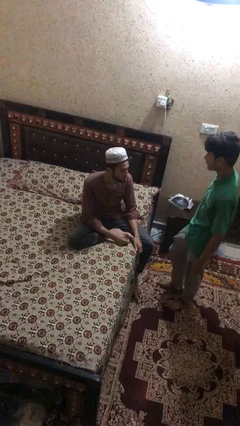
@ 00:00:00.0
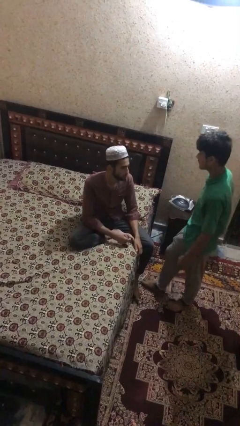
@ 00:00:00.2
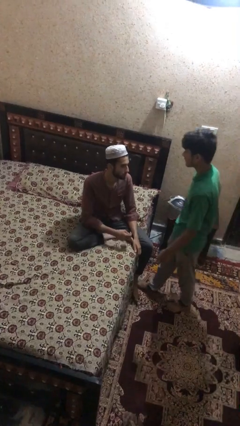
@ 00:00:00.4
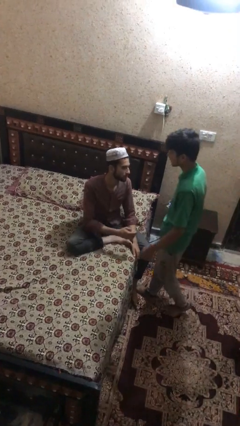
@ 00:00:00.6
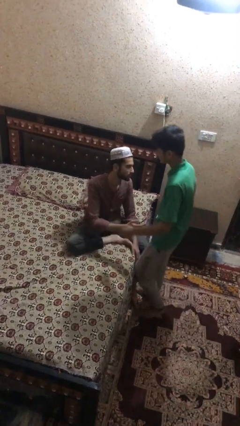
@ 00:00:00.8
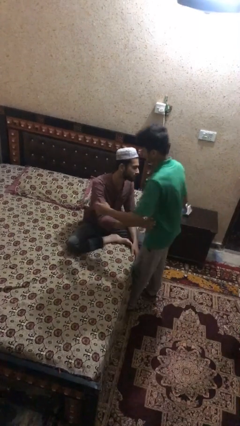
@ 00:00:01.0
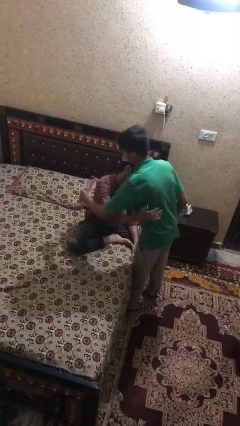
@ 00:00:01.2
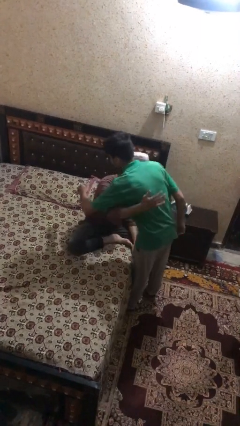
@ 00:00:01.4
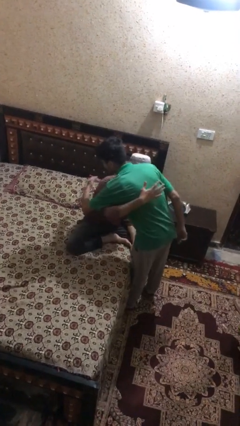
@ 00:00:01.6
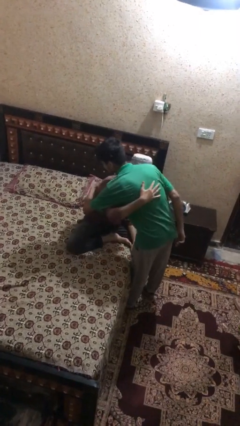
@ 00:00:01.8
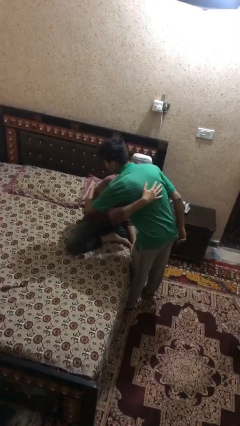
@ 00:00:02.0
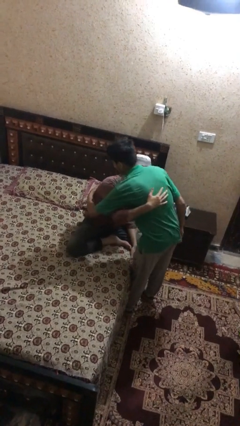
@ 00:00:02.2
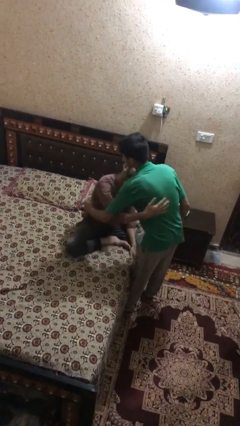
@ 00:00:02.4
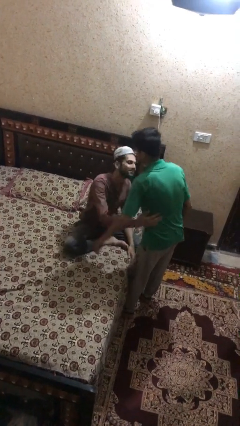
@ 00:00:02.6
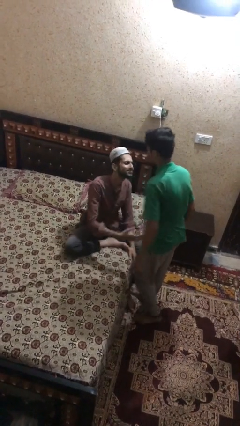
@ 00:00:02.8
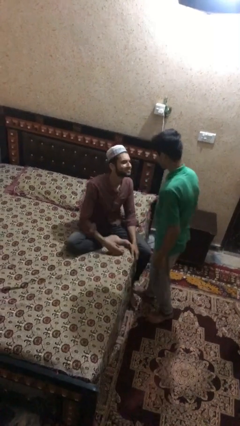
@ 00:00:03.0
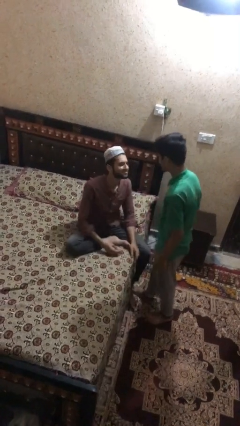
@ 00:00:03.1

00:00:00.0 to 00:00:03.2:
person embraces person

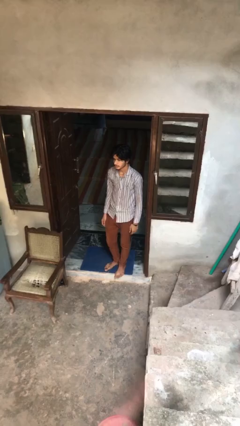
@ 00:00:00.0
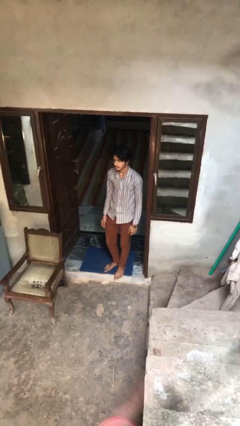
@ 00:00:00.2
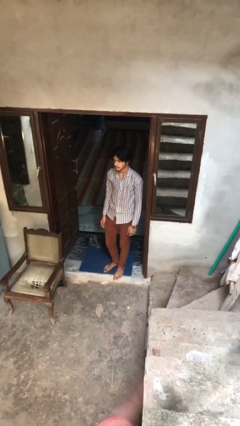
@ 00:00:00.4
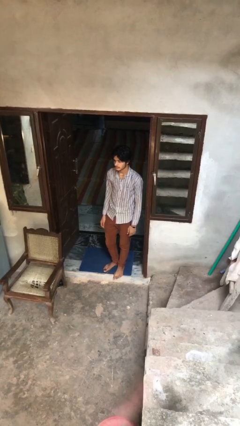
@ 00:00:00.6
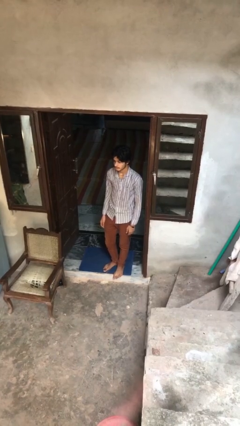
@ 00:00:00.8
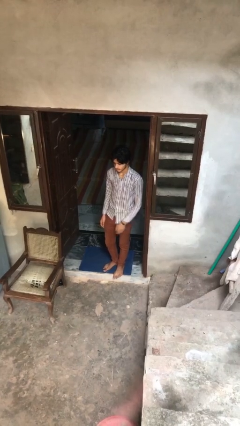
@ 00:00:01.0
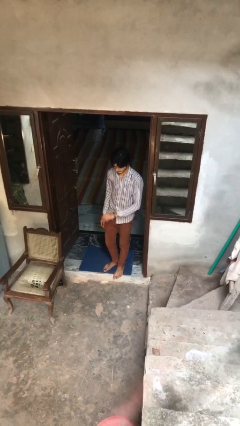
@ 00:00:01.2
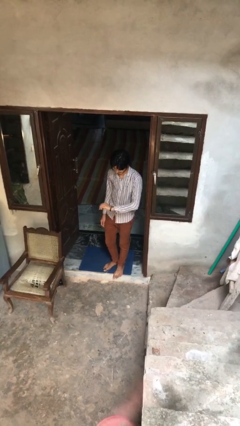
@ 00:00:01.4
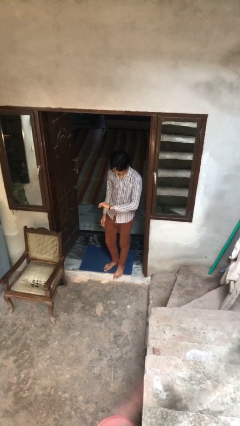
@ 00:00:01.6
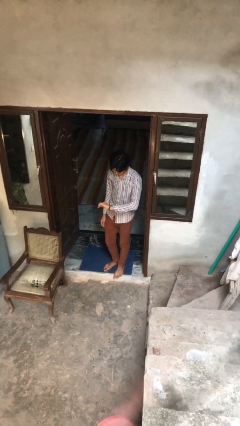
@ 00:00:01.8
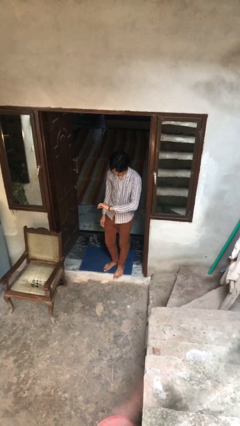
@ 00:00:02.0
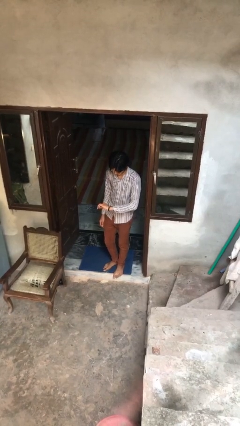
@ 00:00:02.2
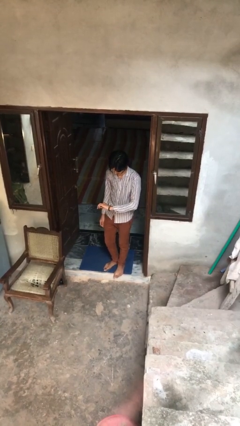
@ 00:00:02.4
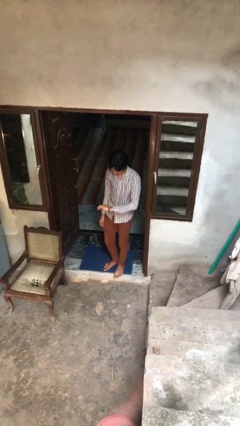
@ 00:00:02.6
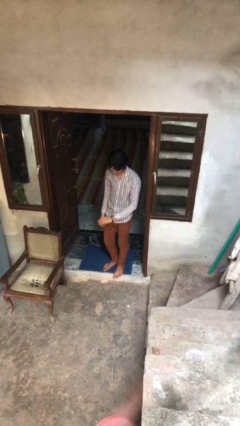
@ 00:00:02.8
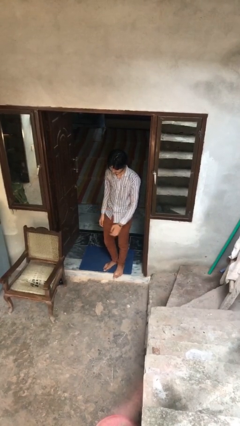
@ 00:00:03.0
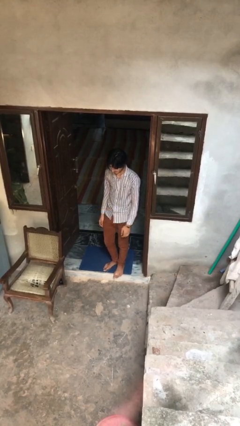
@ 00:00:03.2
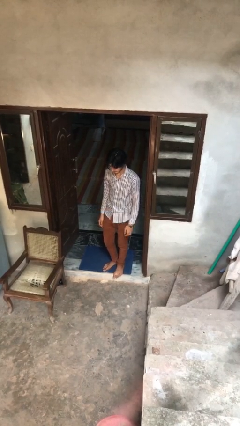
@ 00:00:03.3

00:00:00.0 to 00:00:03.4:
person looks at wristwatch

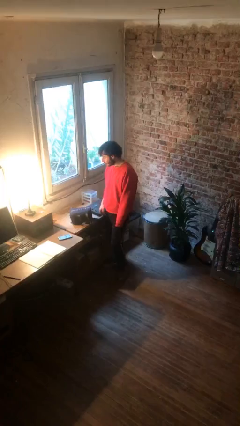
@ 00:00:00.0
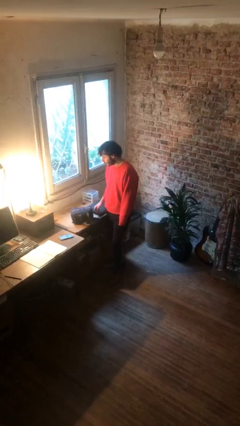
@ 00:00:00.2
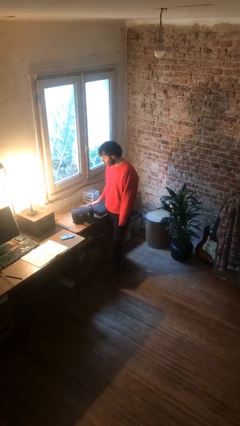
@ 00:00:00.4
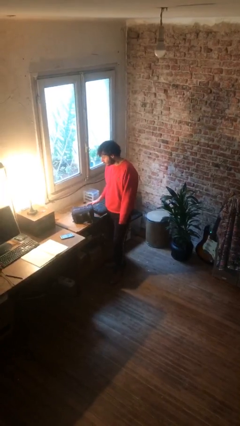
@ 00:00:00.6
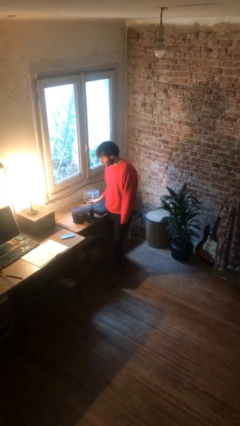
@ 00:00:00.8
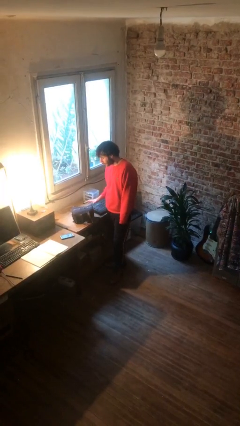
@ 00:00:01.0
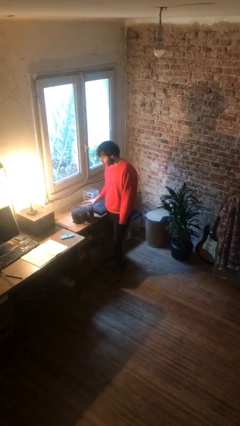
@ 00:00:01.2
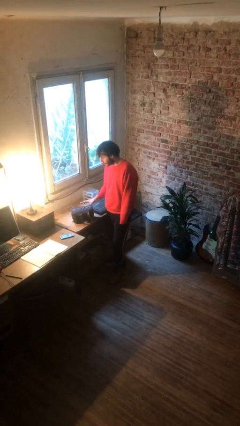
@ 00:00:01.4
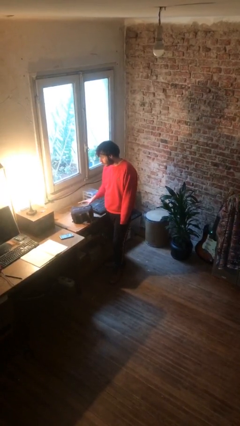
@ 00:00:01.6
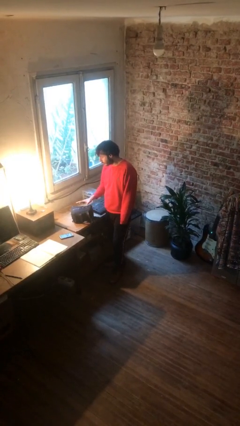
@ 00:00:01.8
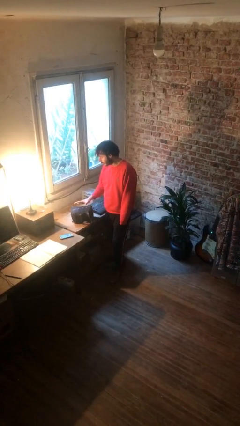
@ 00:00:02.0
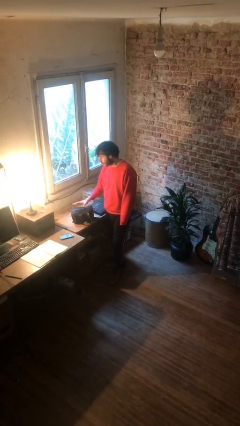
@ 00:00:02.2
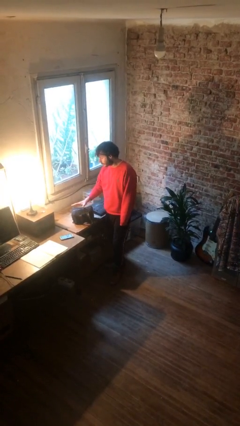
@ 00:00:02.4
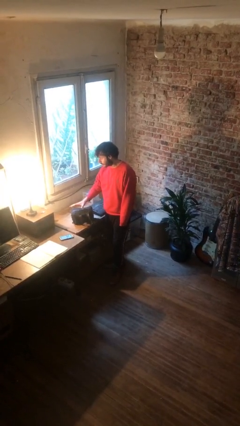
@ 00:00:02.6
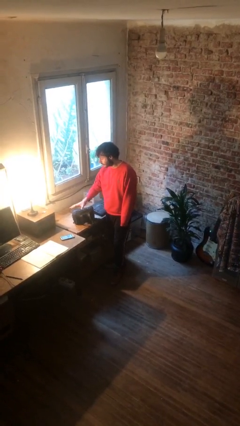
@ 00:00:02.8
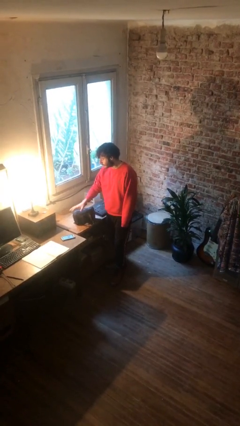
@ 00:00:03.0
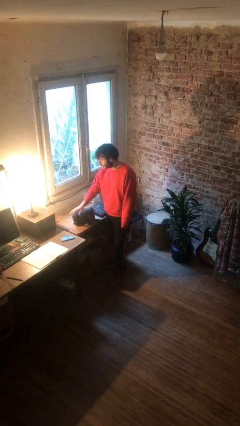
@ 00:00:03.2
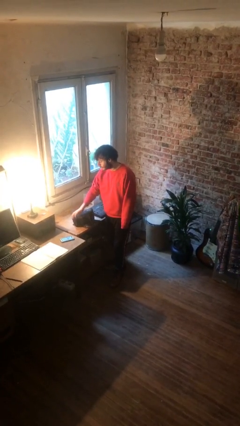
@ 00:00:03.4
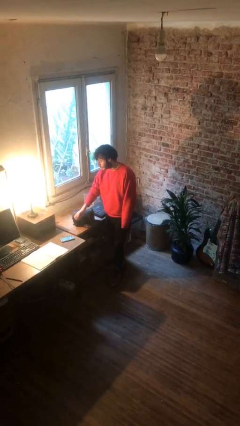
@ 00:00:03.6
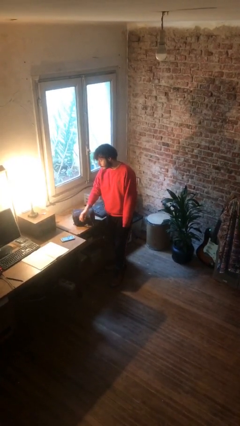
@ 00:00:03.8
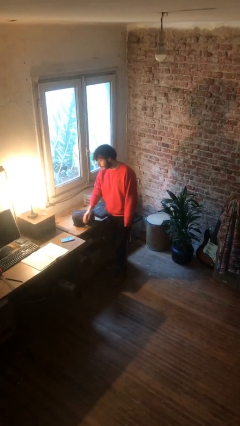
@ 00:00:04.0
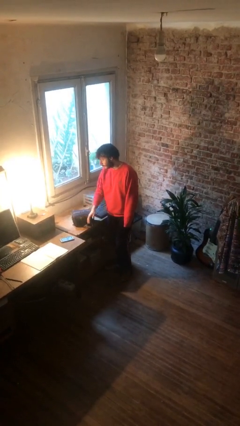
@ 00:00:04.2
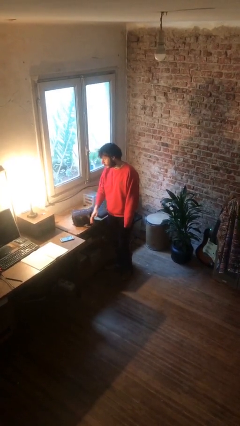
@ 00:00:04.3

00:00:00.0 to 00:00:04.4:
person waves hand over object

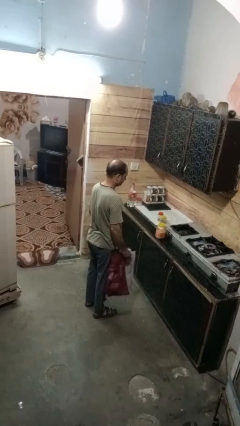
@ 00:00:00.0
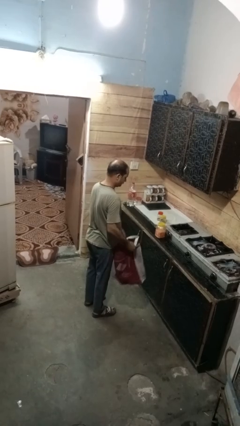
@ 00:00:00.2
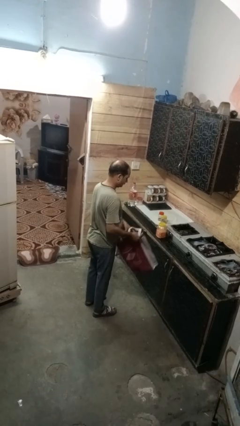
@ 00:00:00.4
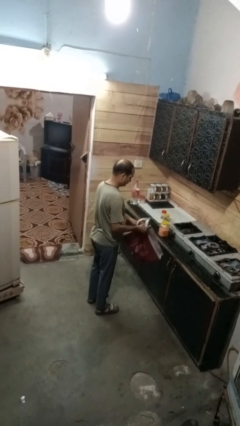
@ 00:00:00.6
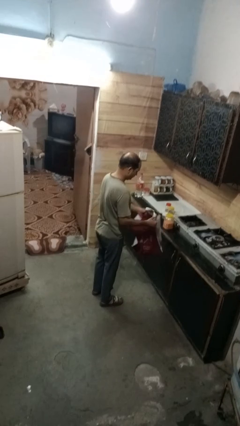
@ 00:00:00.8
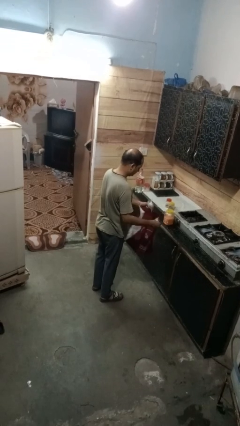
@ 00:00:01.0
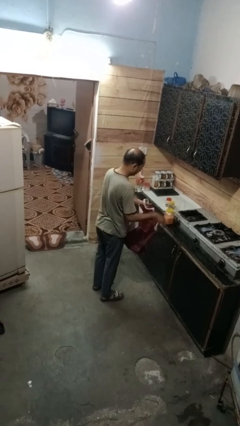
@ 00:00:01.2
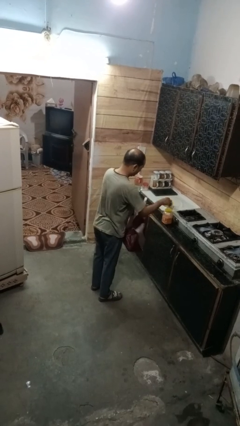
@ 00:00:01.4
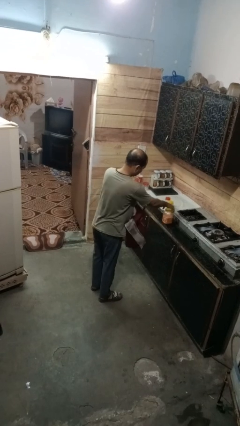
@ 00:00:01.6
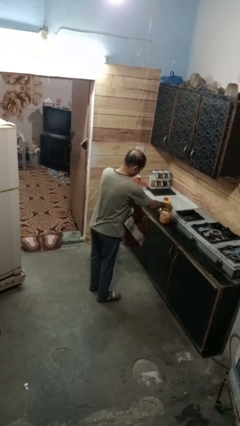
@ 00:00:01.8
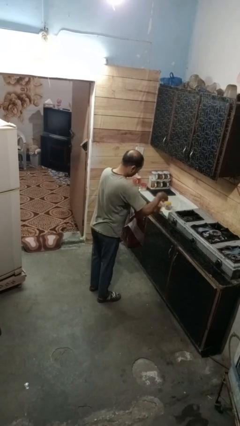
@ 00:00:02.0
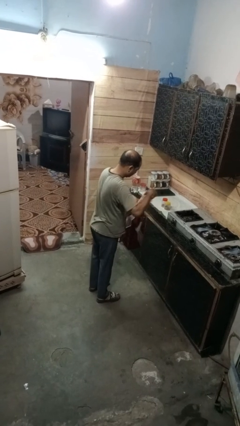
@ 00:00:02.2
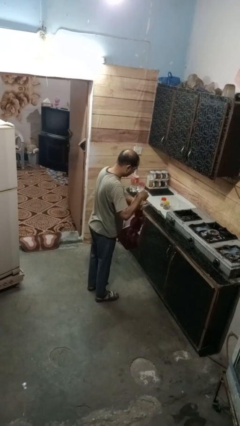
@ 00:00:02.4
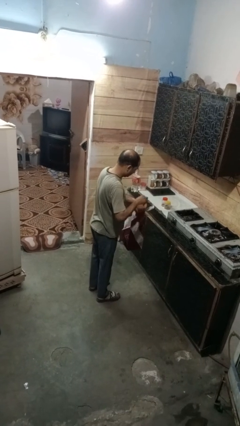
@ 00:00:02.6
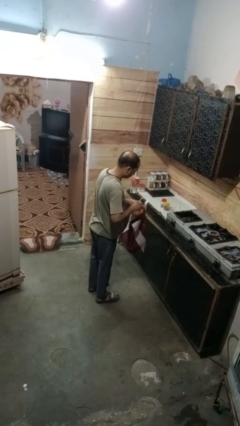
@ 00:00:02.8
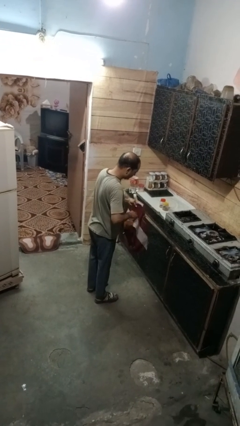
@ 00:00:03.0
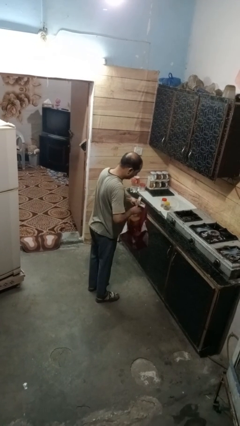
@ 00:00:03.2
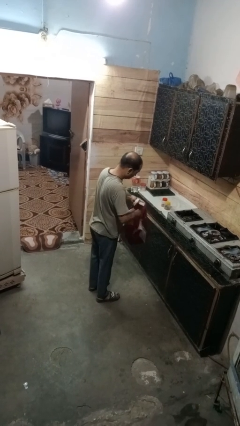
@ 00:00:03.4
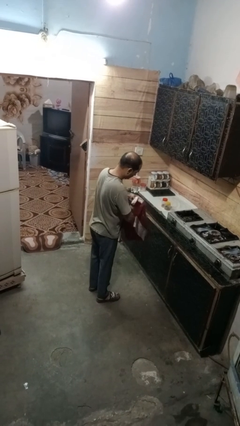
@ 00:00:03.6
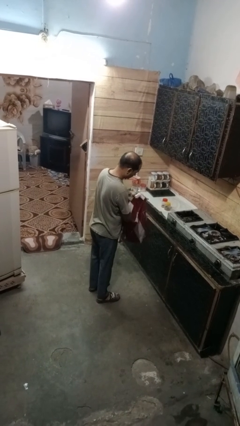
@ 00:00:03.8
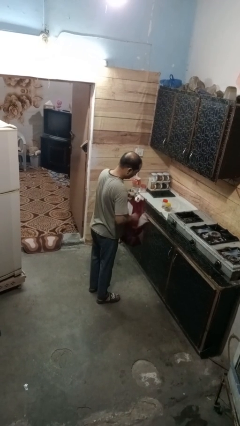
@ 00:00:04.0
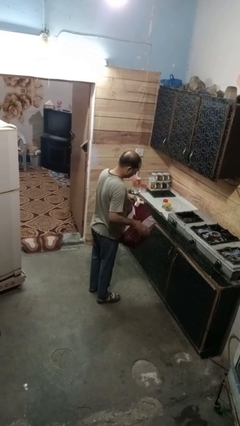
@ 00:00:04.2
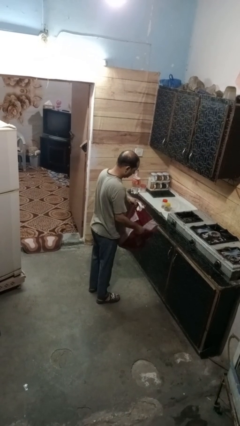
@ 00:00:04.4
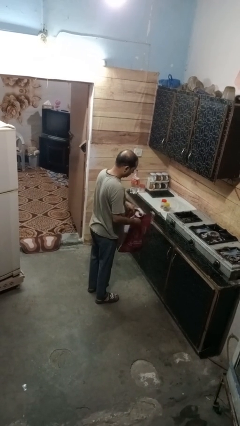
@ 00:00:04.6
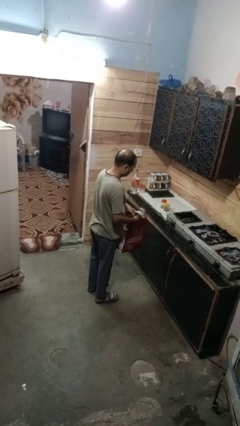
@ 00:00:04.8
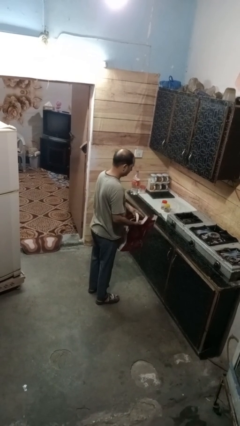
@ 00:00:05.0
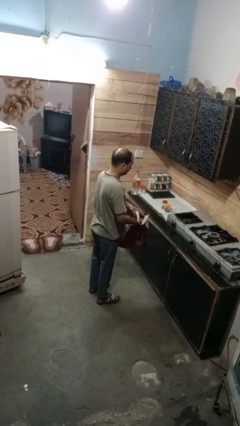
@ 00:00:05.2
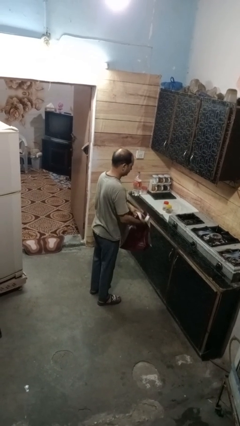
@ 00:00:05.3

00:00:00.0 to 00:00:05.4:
person puts object into bag

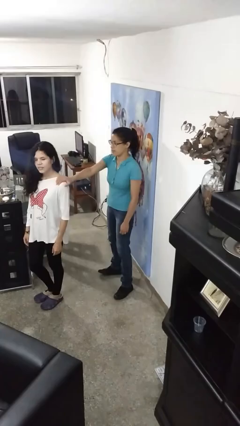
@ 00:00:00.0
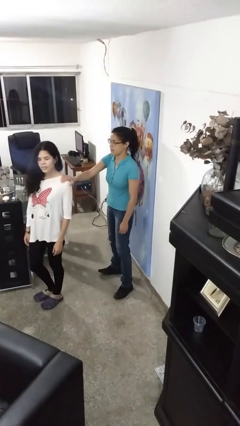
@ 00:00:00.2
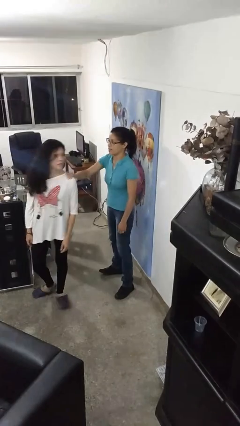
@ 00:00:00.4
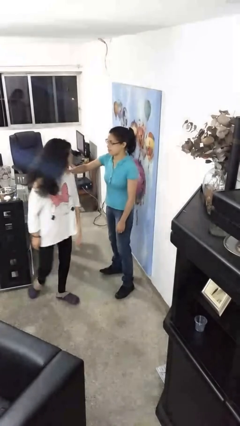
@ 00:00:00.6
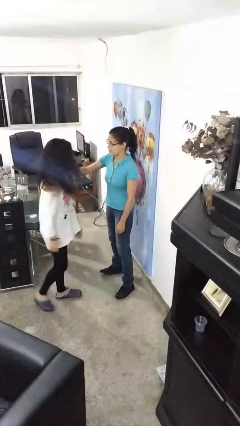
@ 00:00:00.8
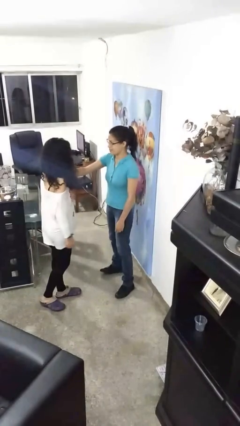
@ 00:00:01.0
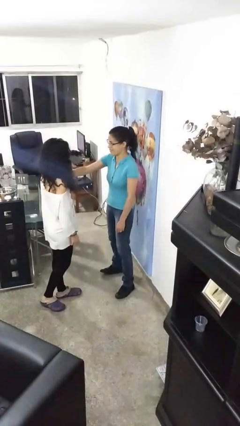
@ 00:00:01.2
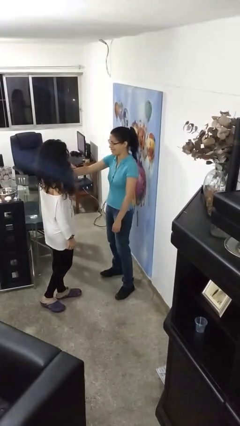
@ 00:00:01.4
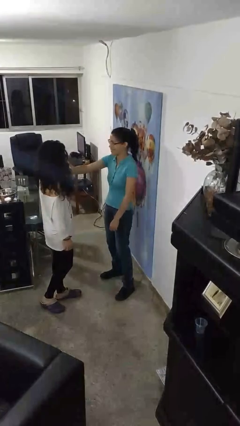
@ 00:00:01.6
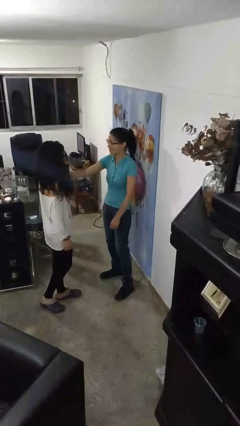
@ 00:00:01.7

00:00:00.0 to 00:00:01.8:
person spins person around
